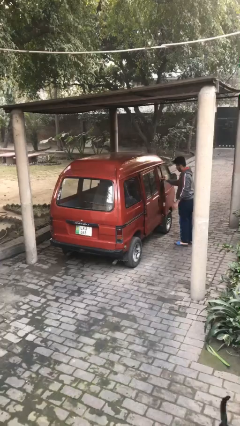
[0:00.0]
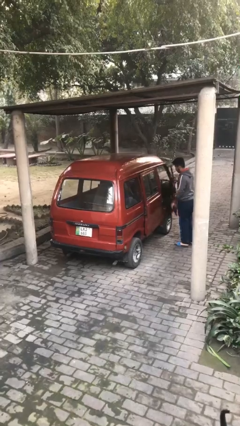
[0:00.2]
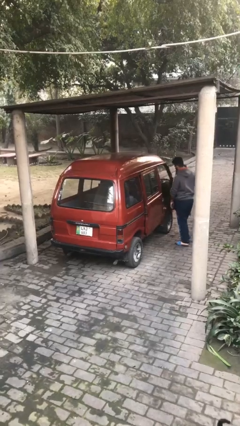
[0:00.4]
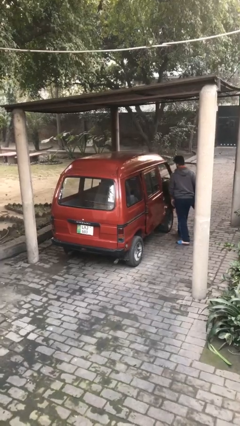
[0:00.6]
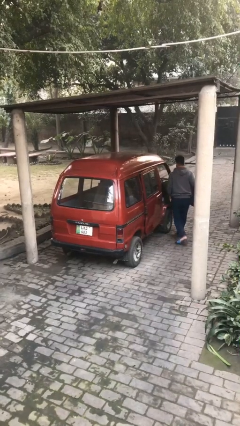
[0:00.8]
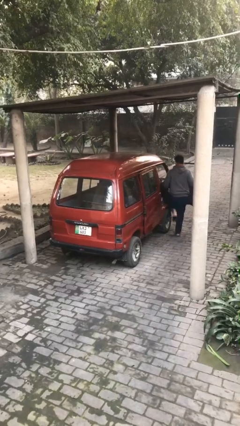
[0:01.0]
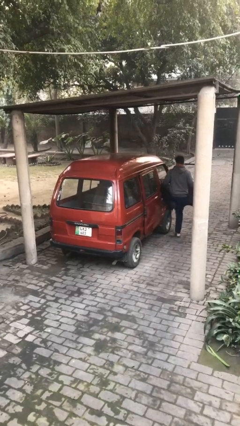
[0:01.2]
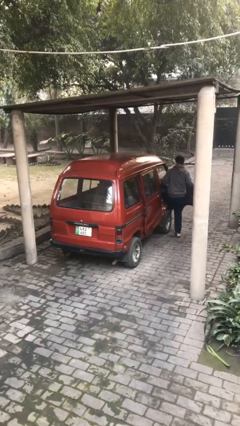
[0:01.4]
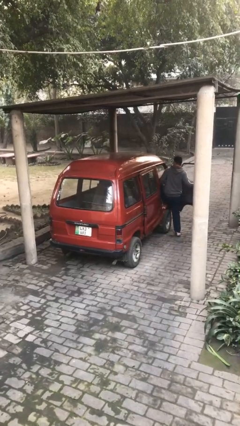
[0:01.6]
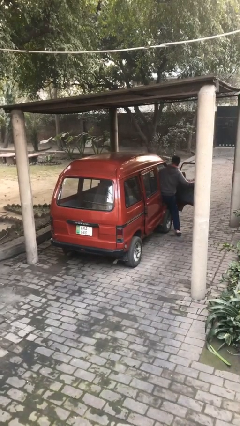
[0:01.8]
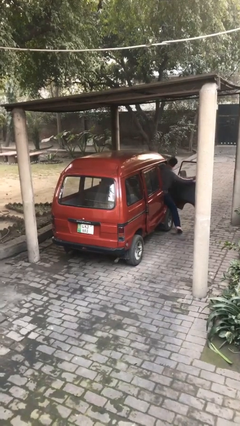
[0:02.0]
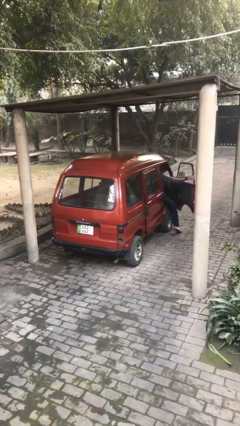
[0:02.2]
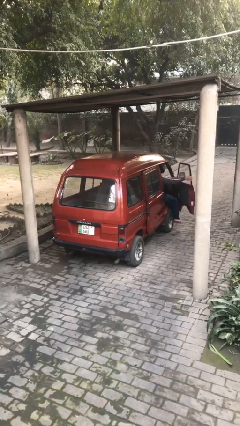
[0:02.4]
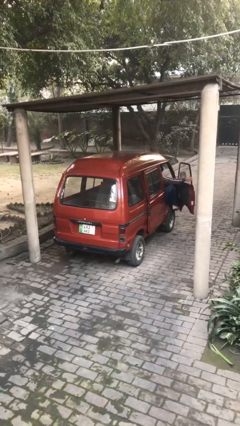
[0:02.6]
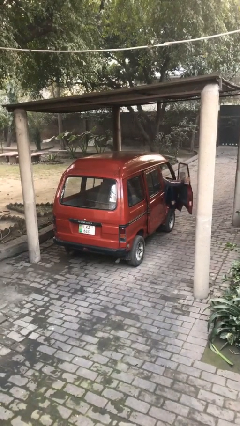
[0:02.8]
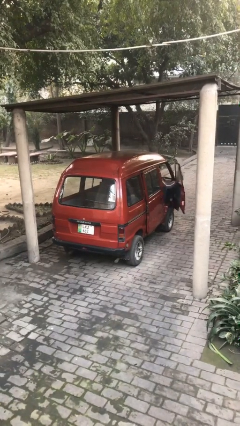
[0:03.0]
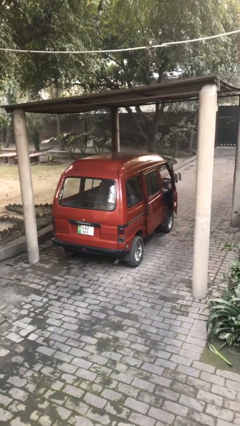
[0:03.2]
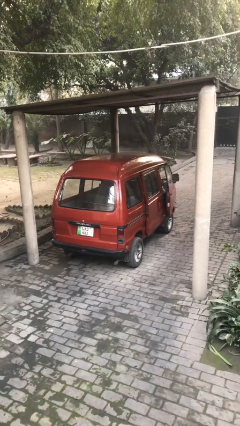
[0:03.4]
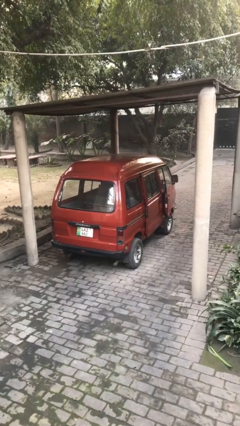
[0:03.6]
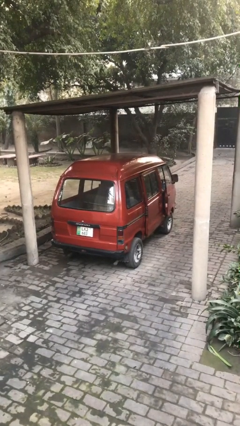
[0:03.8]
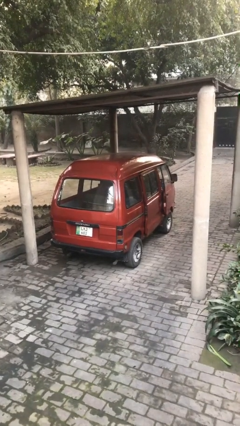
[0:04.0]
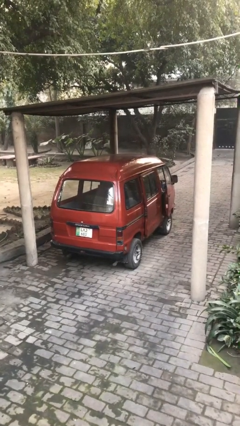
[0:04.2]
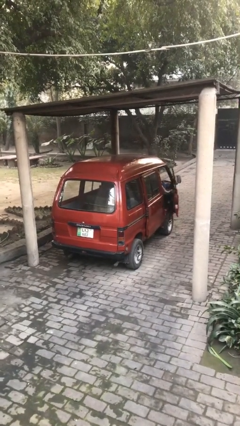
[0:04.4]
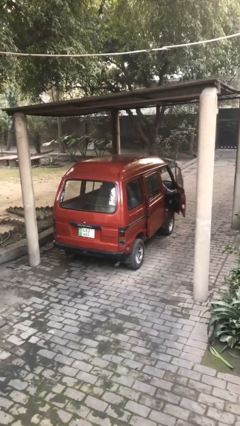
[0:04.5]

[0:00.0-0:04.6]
car picks up person

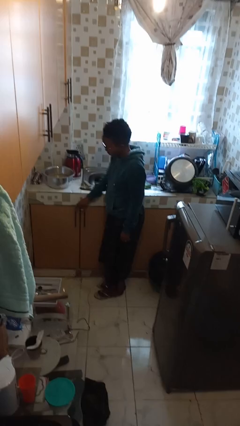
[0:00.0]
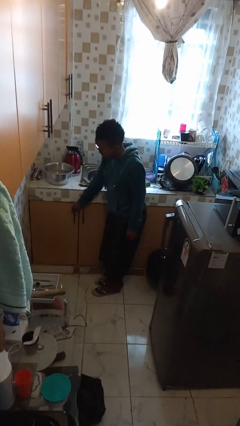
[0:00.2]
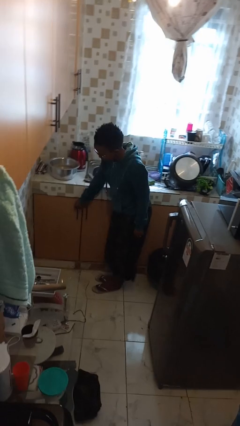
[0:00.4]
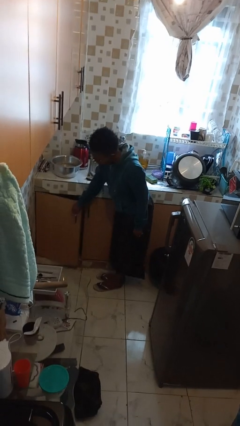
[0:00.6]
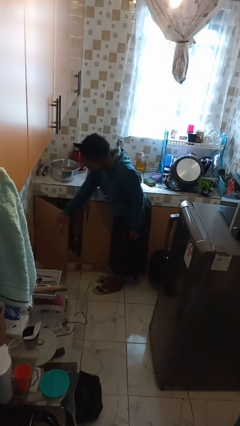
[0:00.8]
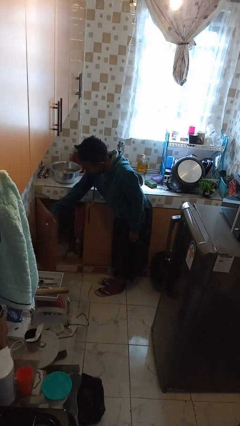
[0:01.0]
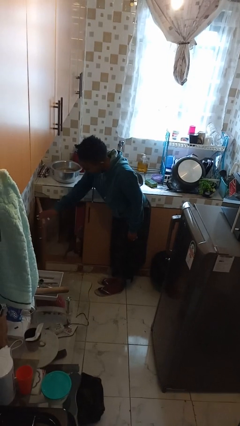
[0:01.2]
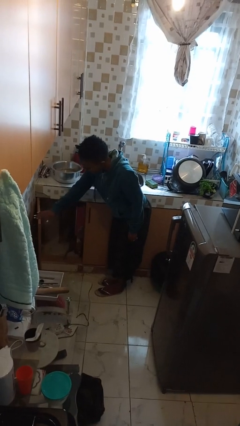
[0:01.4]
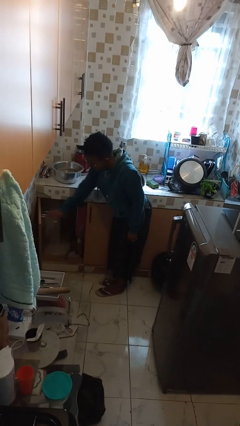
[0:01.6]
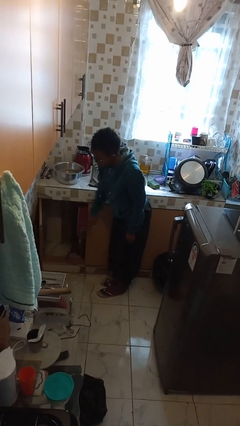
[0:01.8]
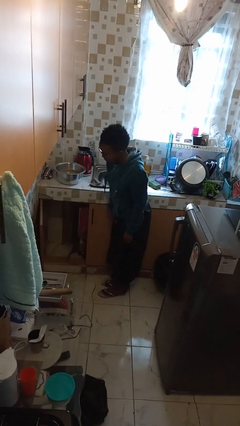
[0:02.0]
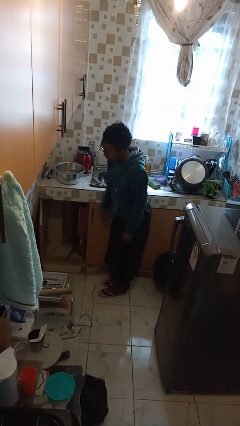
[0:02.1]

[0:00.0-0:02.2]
person opens cabinet

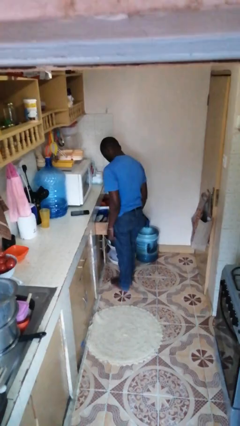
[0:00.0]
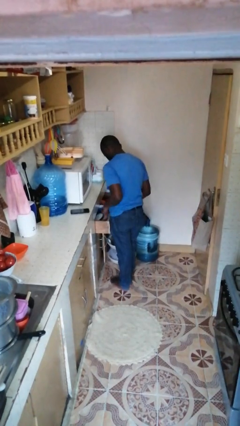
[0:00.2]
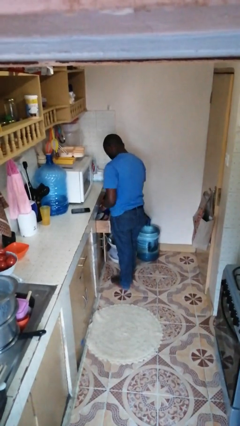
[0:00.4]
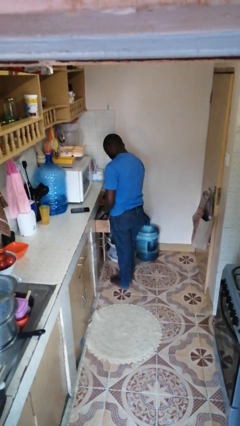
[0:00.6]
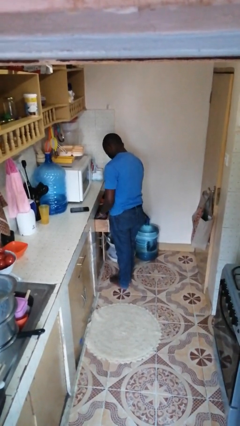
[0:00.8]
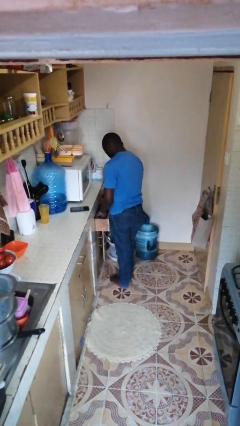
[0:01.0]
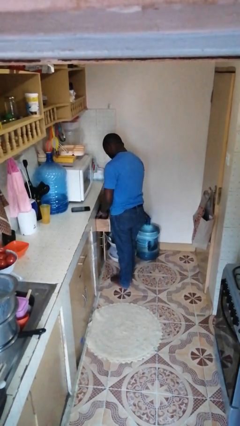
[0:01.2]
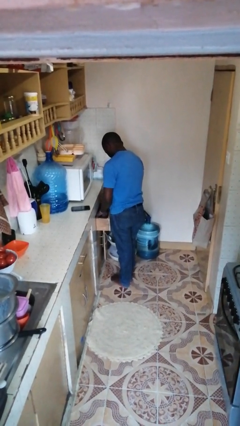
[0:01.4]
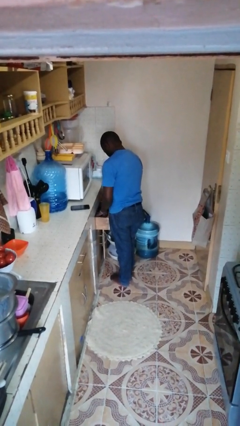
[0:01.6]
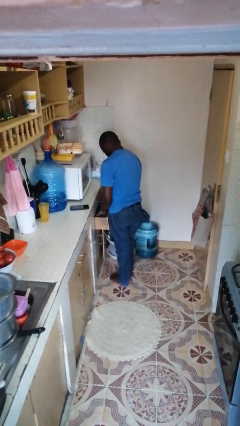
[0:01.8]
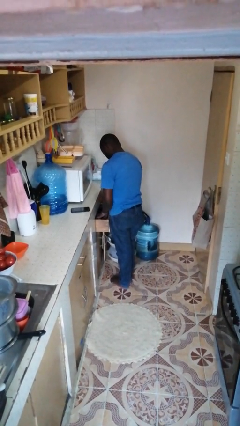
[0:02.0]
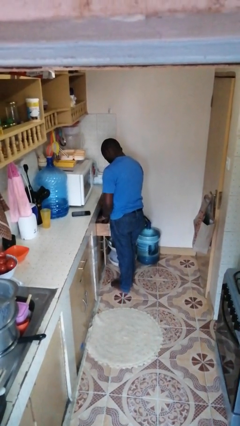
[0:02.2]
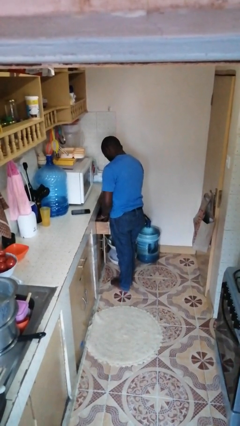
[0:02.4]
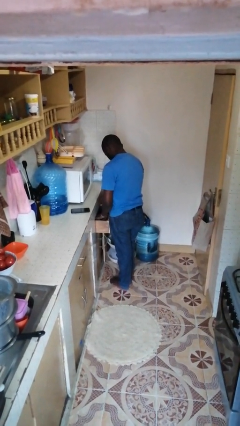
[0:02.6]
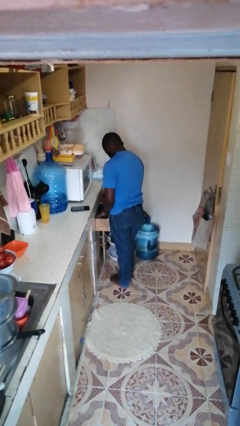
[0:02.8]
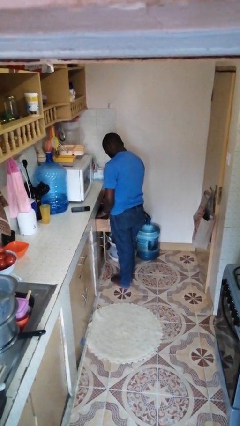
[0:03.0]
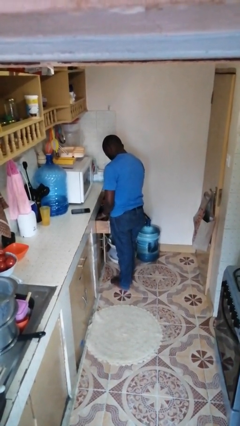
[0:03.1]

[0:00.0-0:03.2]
person searches in kitchen drawer

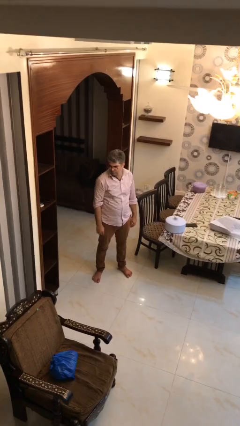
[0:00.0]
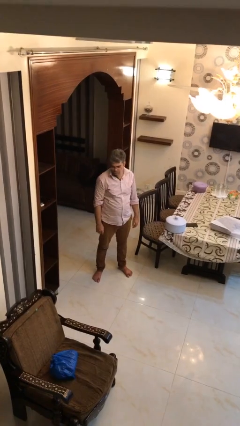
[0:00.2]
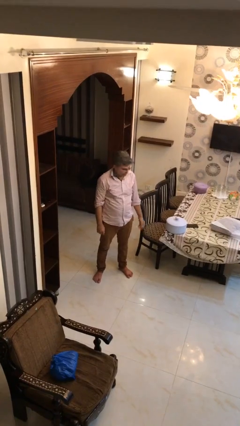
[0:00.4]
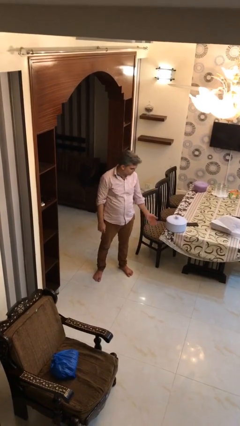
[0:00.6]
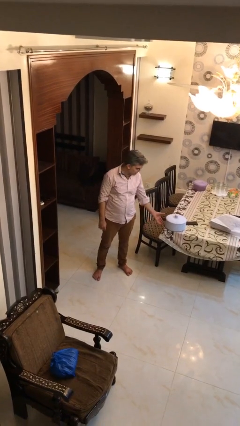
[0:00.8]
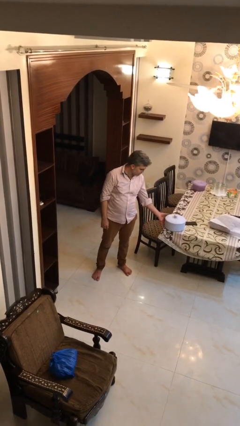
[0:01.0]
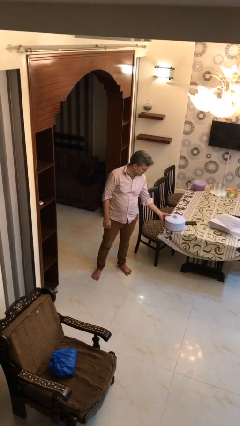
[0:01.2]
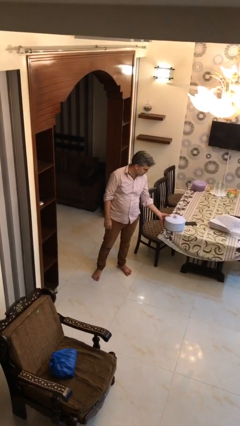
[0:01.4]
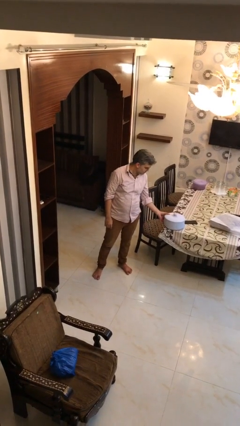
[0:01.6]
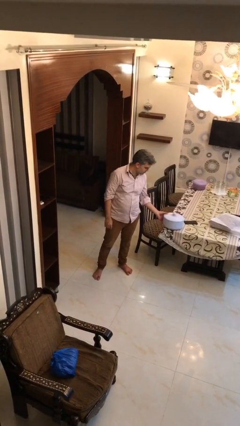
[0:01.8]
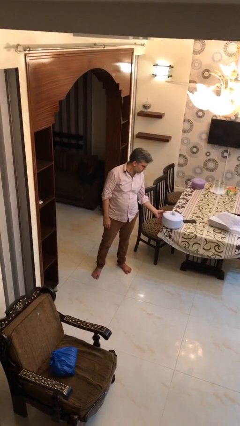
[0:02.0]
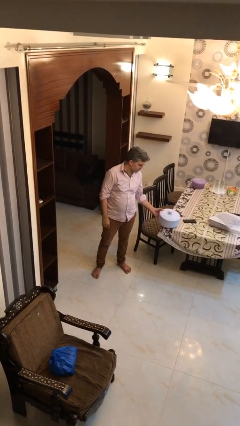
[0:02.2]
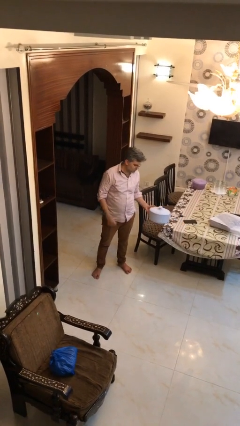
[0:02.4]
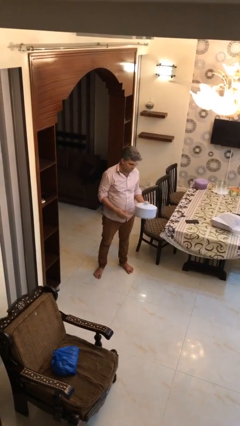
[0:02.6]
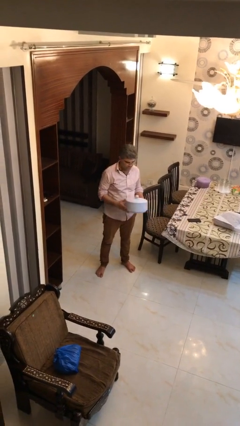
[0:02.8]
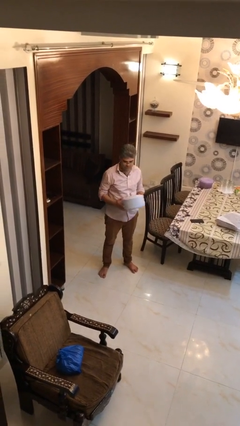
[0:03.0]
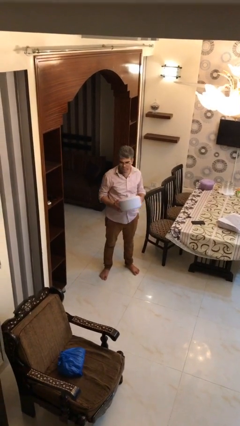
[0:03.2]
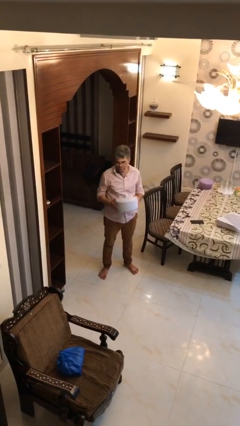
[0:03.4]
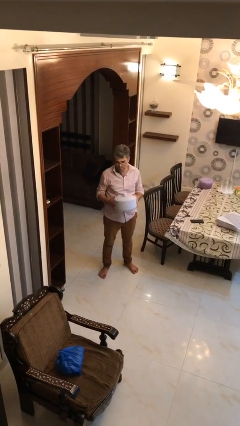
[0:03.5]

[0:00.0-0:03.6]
person picks up object from table

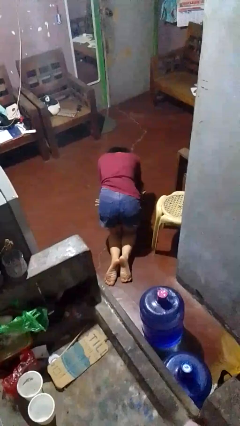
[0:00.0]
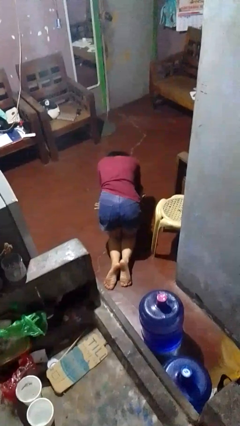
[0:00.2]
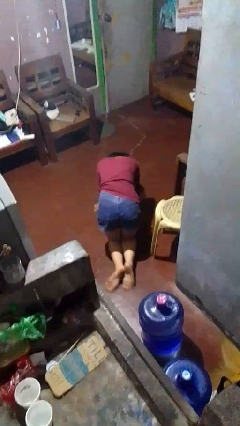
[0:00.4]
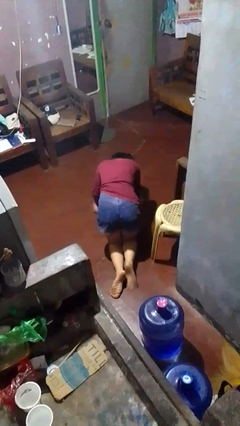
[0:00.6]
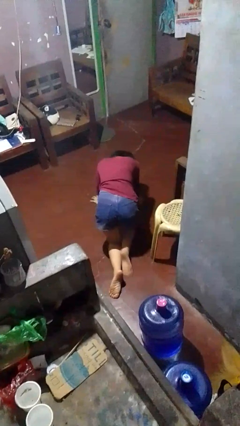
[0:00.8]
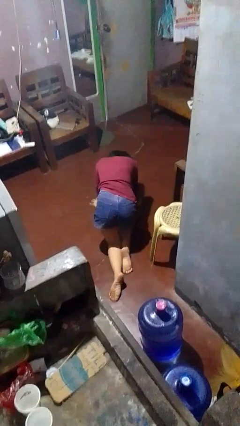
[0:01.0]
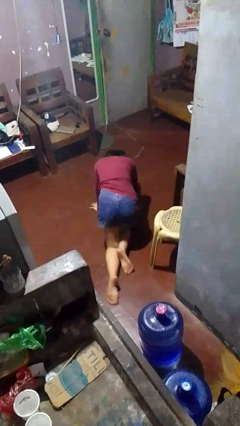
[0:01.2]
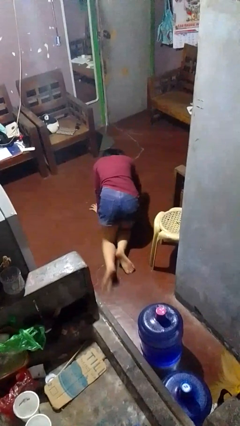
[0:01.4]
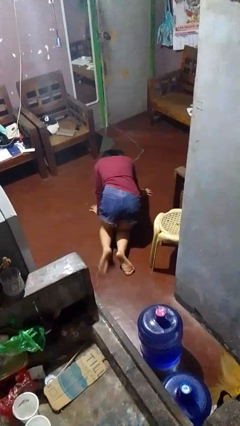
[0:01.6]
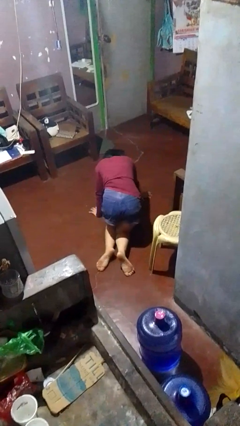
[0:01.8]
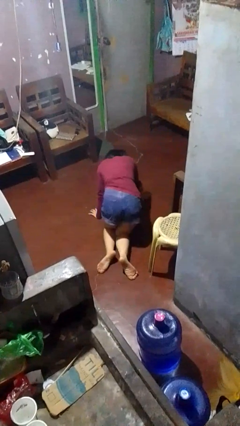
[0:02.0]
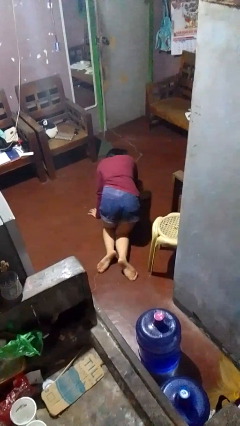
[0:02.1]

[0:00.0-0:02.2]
person crawls

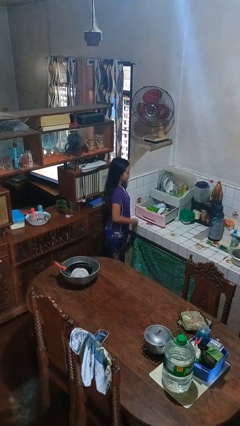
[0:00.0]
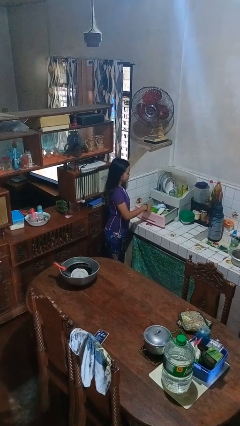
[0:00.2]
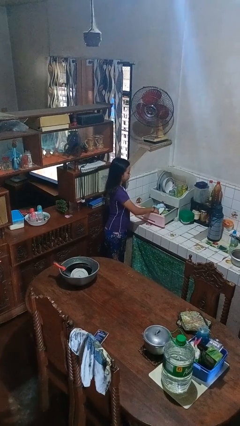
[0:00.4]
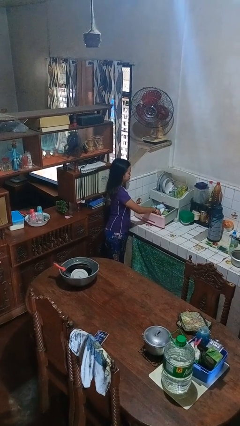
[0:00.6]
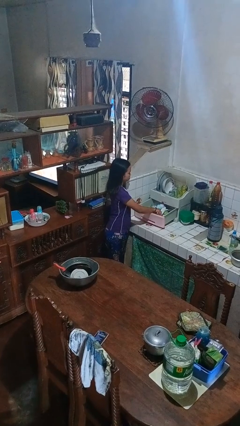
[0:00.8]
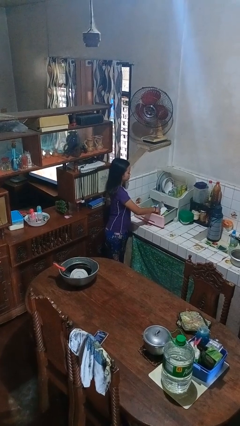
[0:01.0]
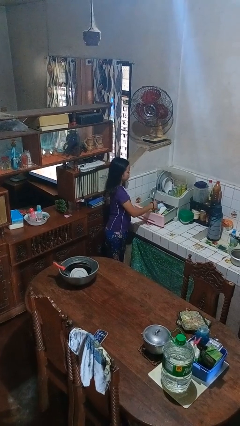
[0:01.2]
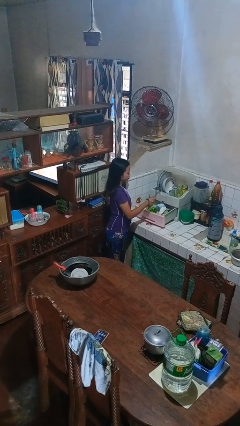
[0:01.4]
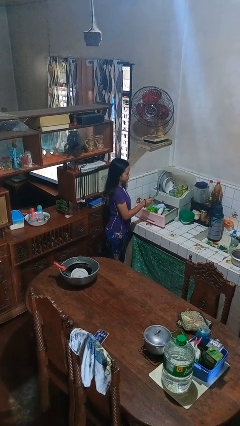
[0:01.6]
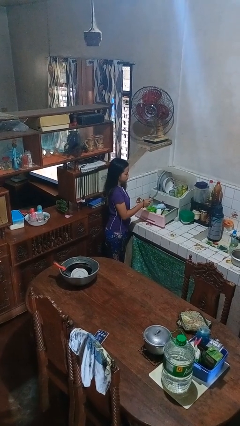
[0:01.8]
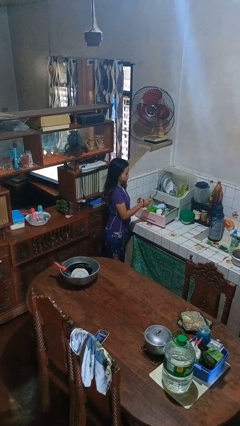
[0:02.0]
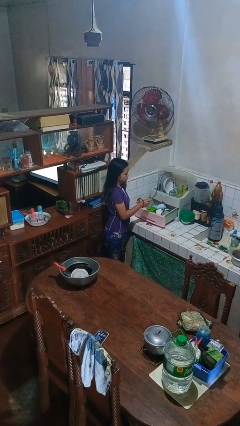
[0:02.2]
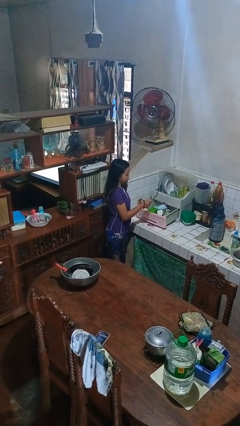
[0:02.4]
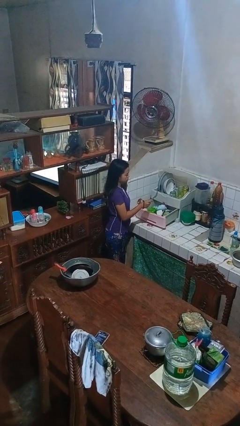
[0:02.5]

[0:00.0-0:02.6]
person takes object from kitchen drawer
